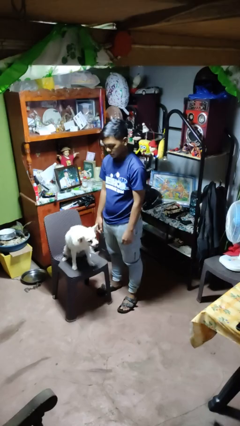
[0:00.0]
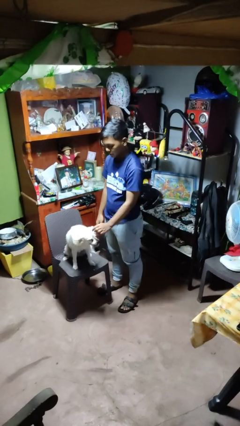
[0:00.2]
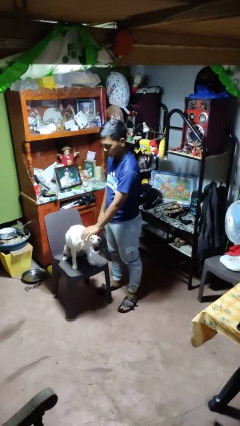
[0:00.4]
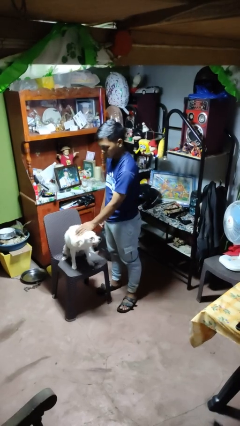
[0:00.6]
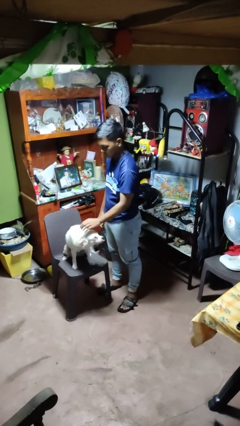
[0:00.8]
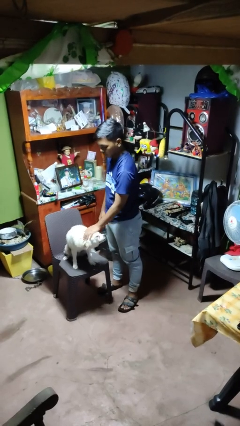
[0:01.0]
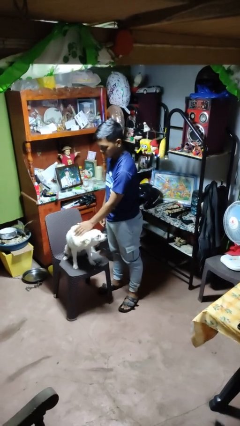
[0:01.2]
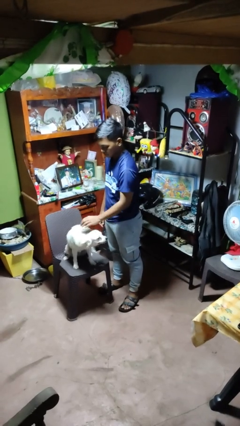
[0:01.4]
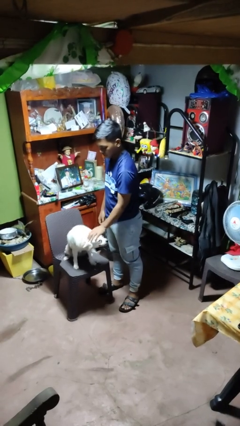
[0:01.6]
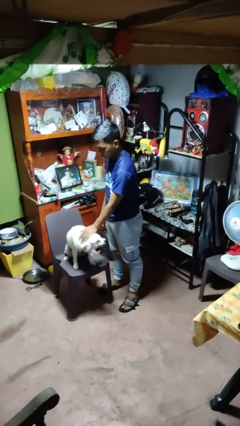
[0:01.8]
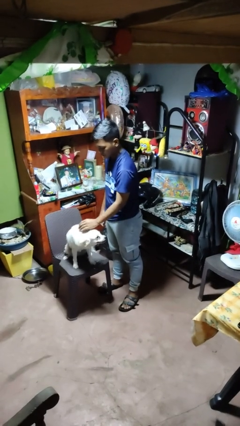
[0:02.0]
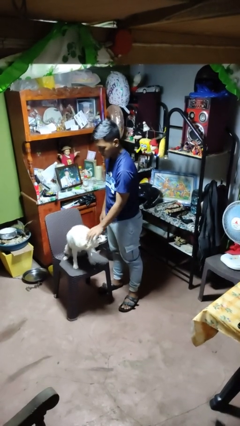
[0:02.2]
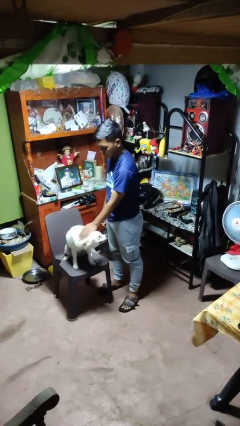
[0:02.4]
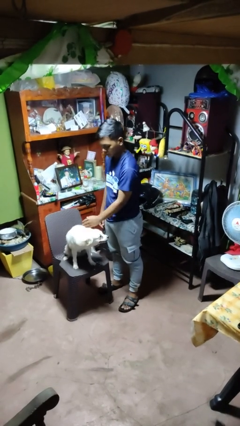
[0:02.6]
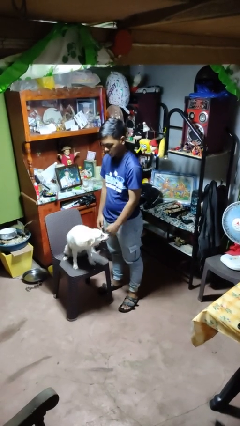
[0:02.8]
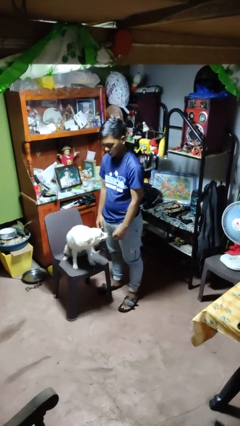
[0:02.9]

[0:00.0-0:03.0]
person pets dog

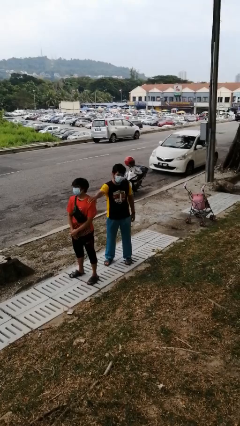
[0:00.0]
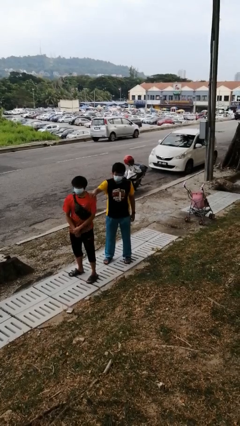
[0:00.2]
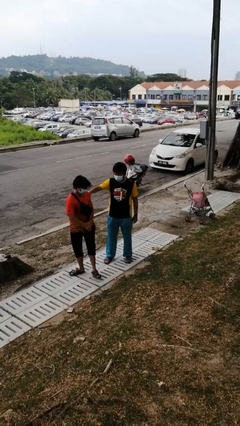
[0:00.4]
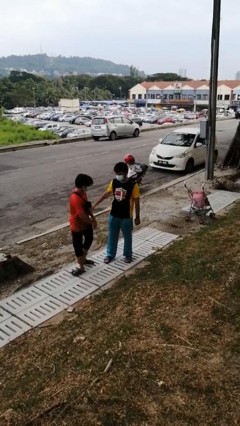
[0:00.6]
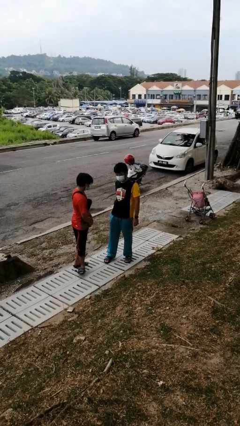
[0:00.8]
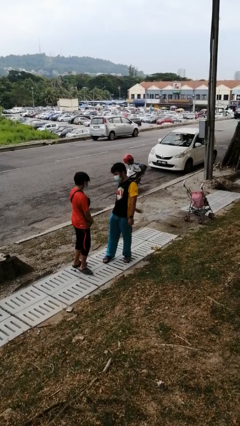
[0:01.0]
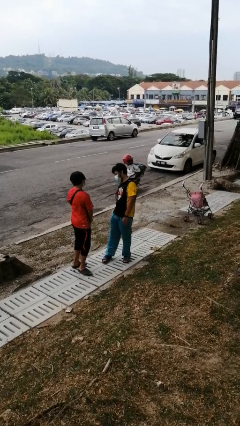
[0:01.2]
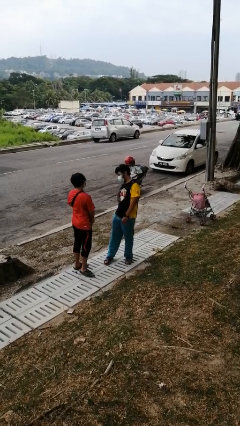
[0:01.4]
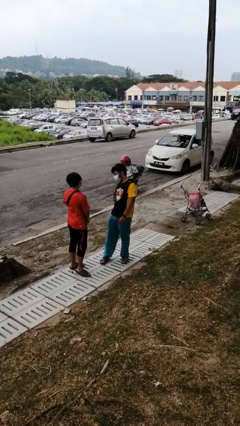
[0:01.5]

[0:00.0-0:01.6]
person spins person around

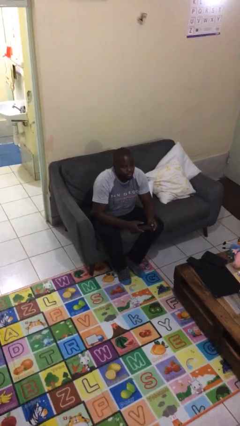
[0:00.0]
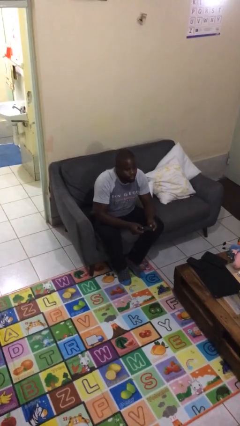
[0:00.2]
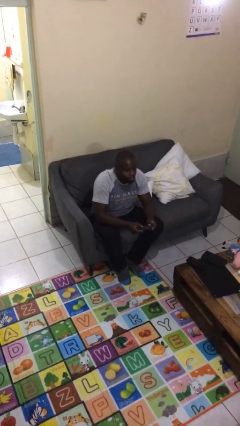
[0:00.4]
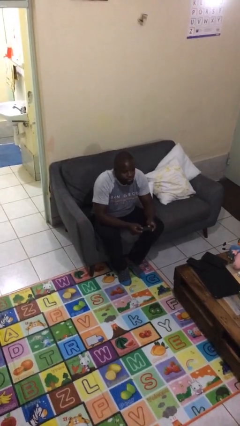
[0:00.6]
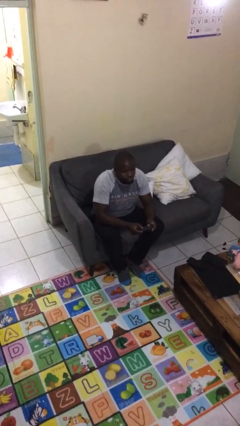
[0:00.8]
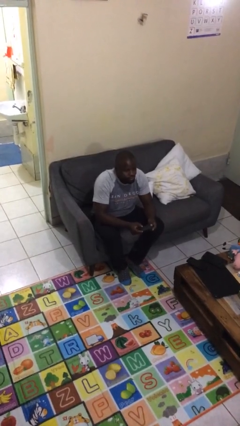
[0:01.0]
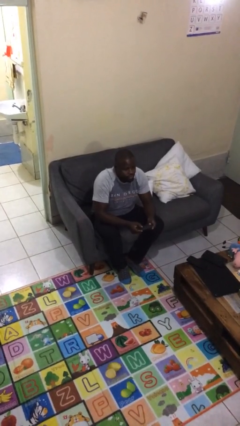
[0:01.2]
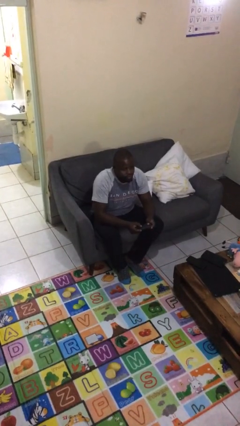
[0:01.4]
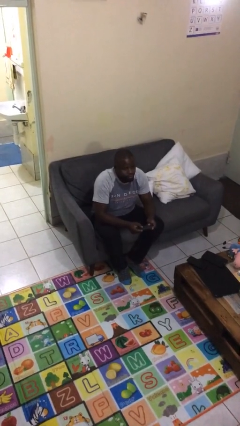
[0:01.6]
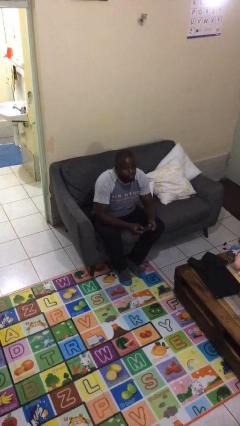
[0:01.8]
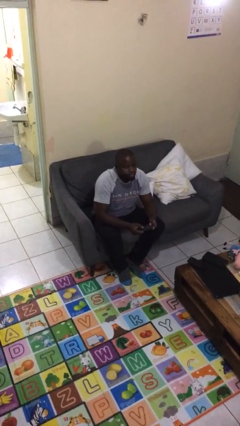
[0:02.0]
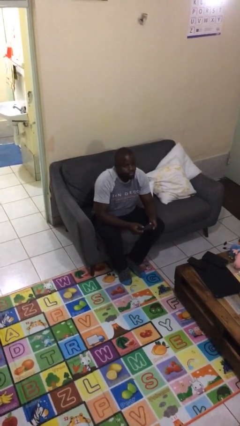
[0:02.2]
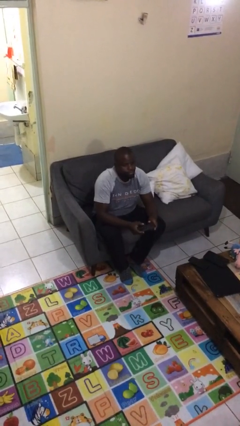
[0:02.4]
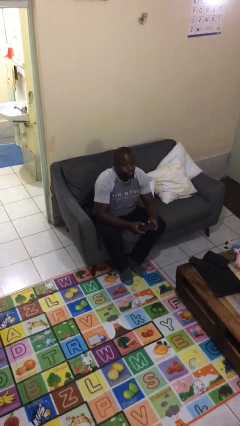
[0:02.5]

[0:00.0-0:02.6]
person interacts with handheld game

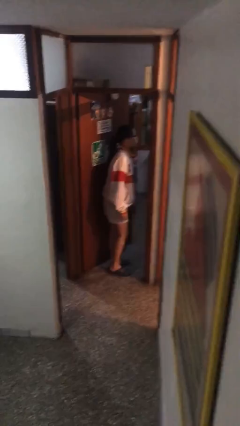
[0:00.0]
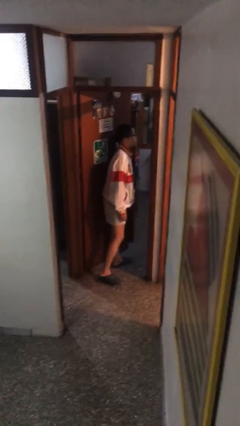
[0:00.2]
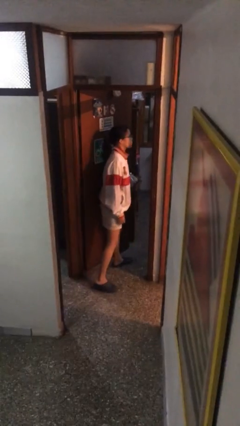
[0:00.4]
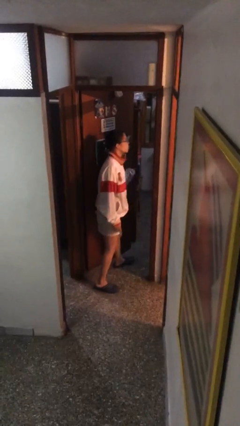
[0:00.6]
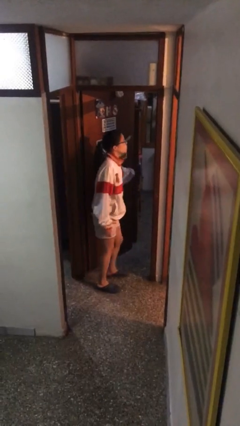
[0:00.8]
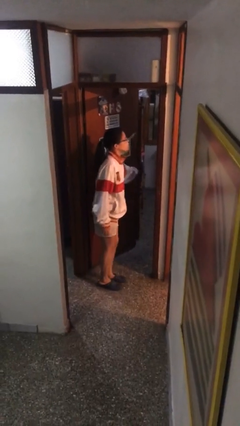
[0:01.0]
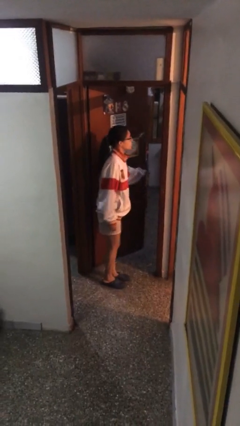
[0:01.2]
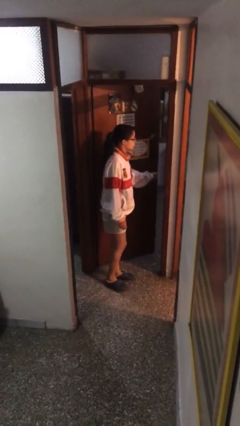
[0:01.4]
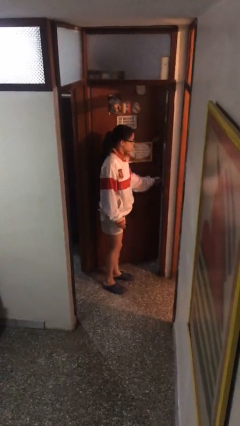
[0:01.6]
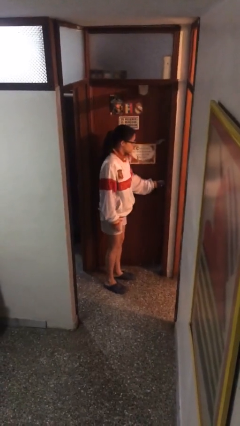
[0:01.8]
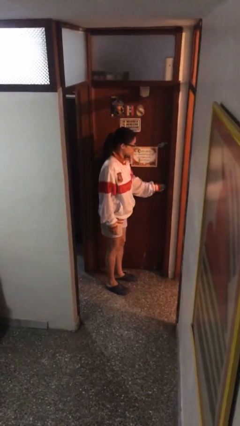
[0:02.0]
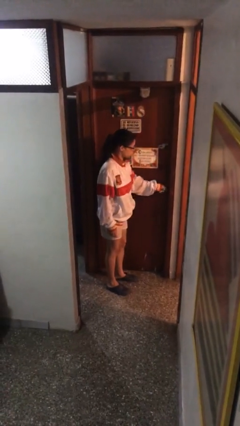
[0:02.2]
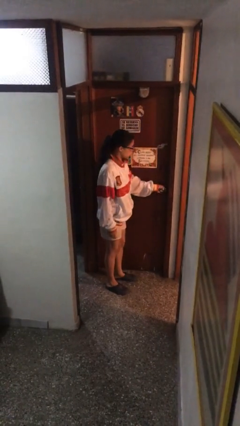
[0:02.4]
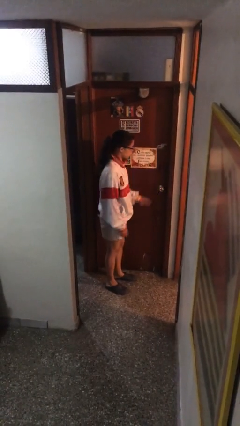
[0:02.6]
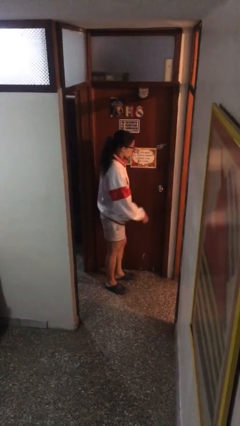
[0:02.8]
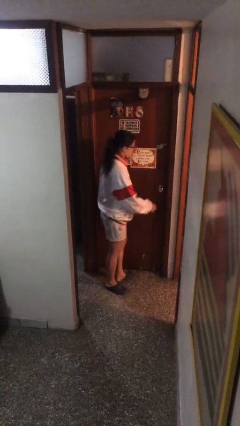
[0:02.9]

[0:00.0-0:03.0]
person closes facility door

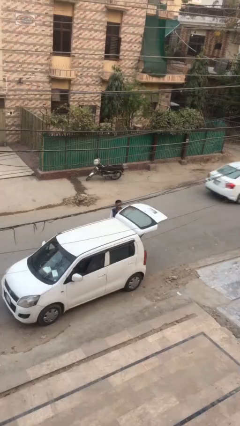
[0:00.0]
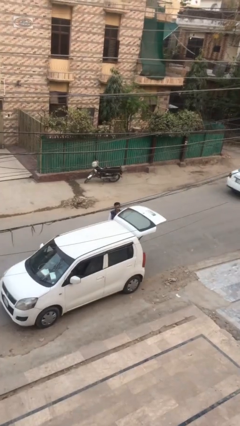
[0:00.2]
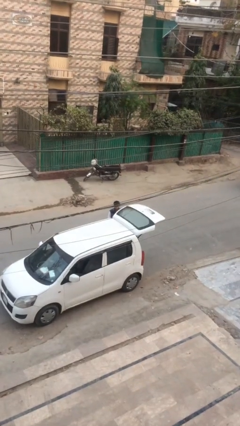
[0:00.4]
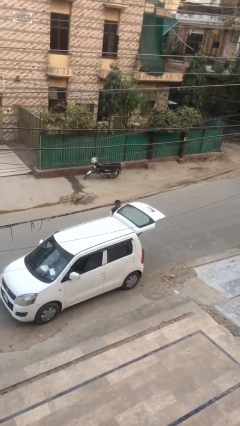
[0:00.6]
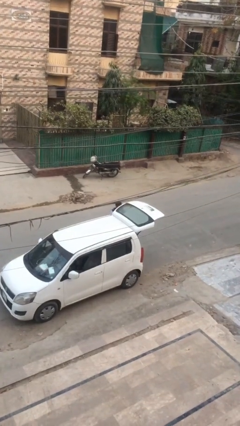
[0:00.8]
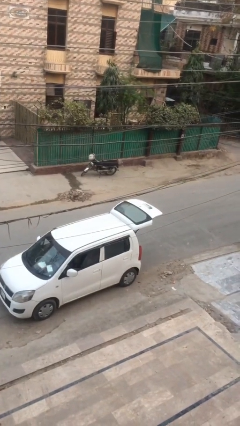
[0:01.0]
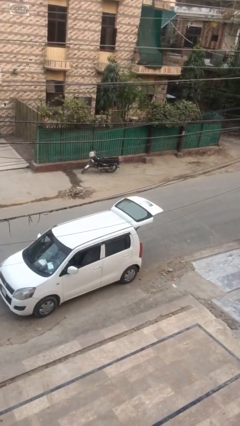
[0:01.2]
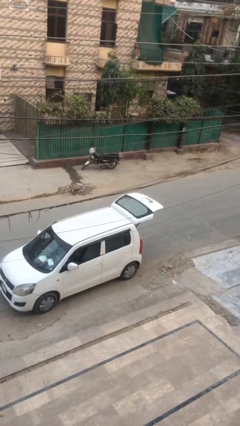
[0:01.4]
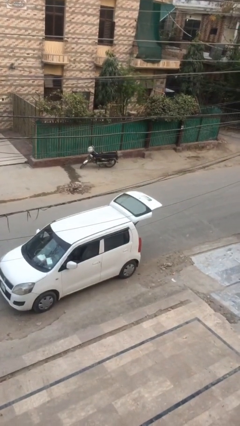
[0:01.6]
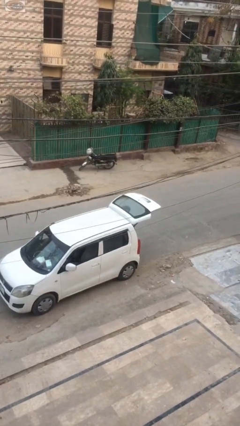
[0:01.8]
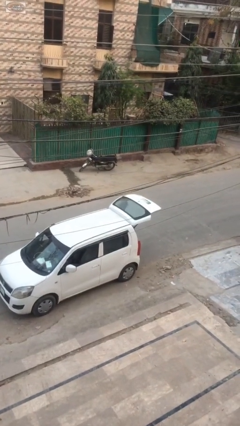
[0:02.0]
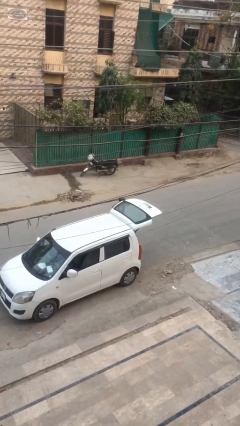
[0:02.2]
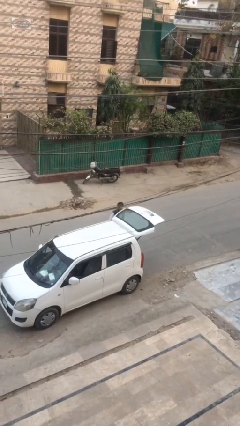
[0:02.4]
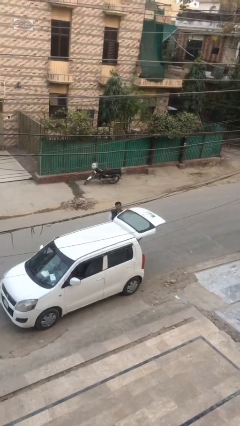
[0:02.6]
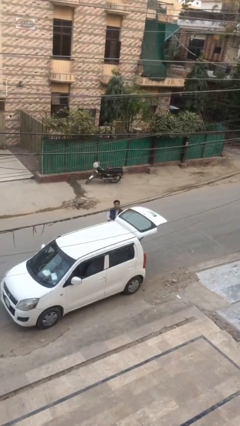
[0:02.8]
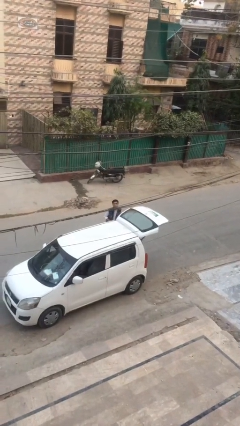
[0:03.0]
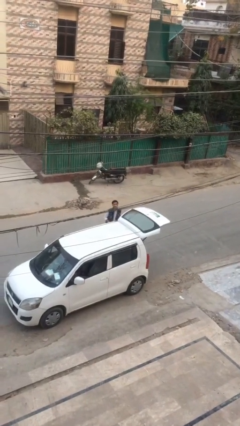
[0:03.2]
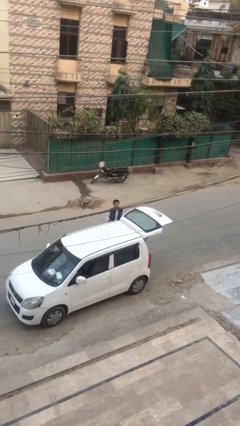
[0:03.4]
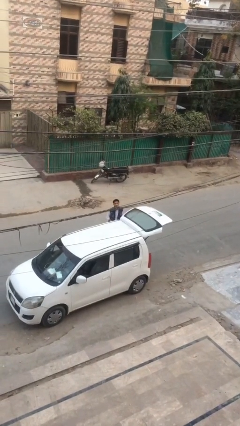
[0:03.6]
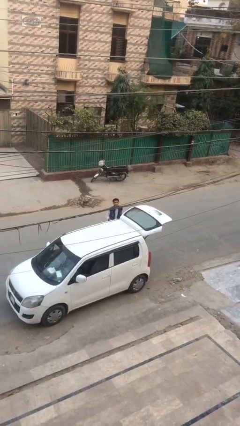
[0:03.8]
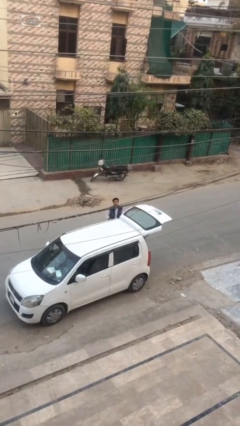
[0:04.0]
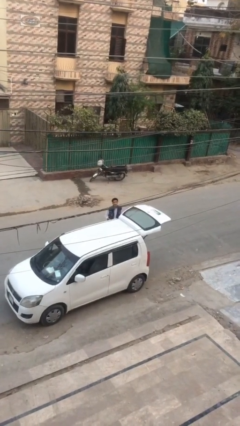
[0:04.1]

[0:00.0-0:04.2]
person unloads car

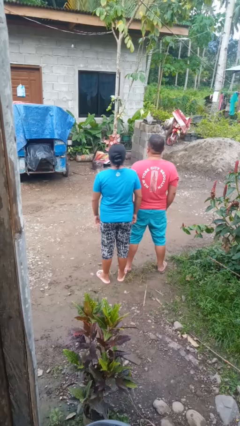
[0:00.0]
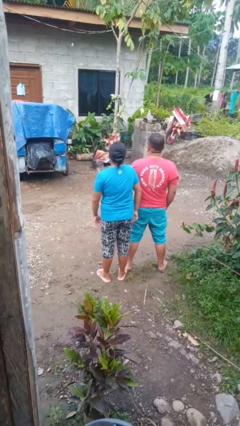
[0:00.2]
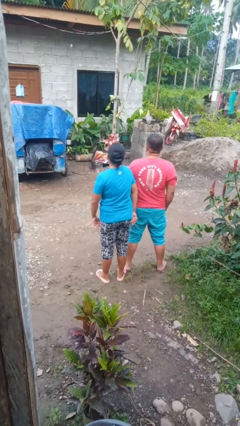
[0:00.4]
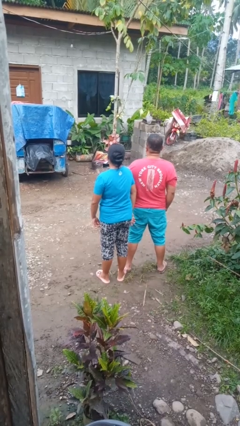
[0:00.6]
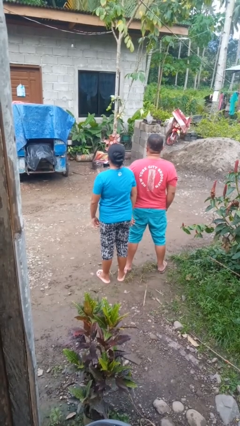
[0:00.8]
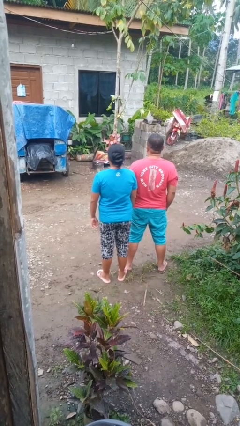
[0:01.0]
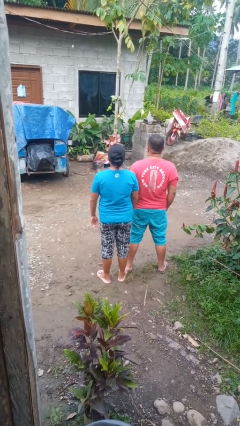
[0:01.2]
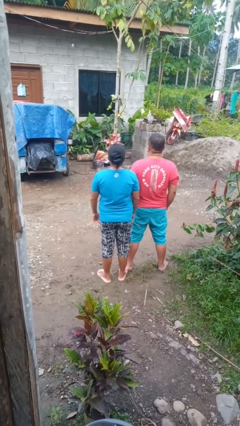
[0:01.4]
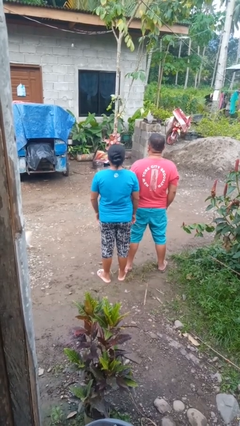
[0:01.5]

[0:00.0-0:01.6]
person nudges person with elbow

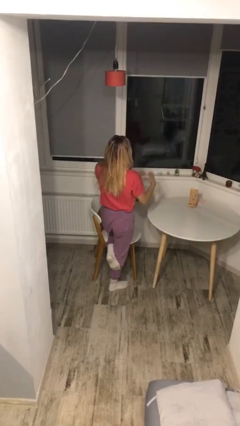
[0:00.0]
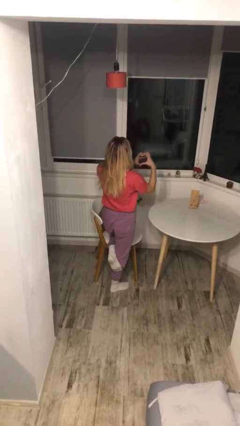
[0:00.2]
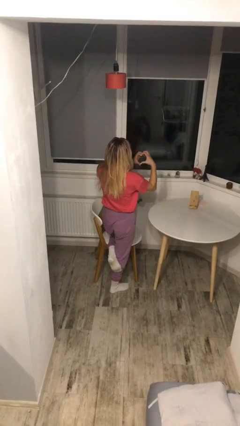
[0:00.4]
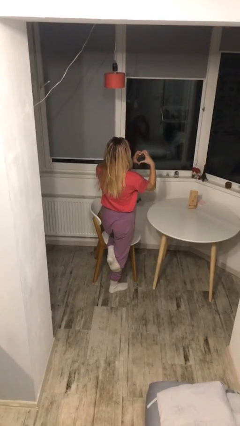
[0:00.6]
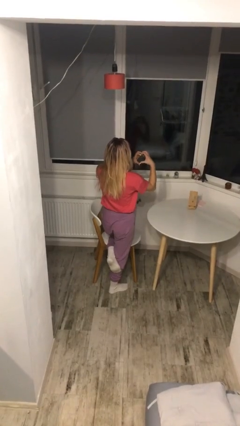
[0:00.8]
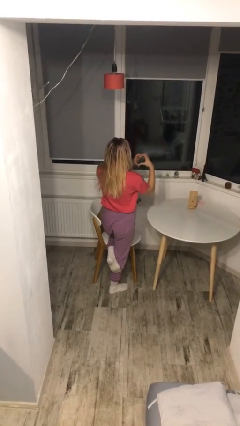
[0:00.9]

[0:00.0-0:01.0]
person gestures heart
